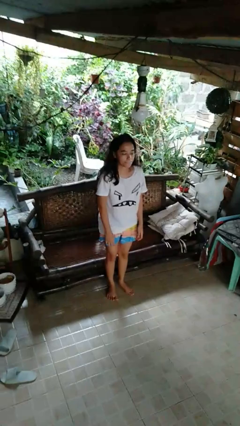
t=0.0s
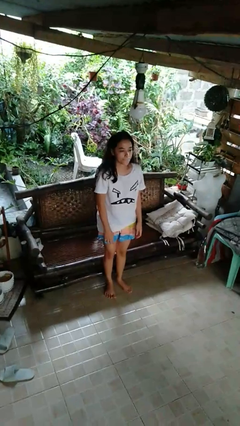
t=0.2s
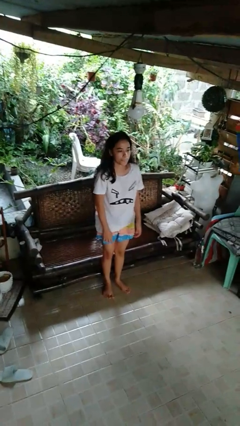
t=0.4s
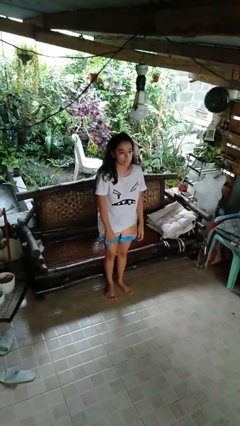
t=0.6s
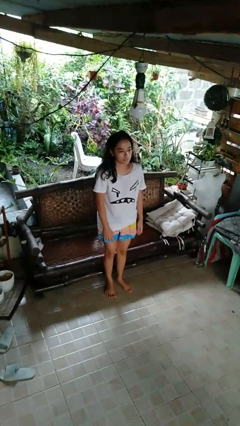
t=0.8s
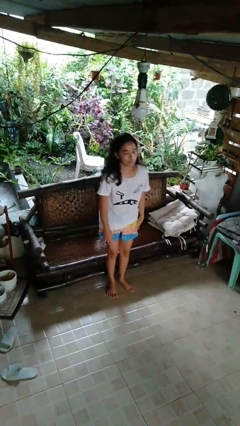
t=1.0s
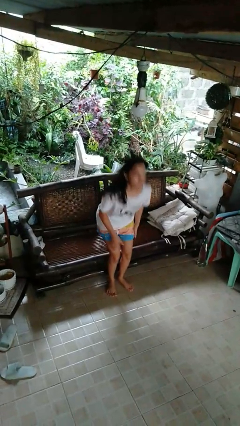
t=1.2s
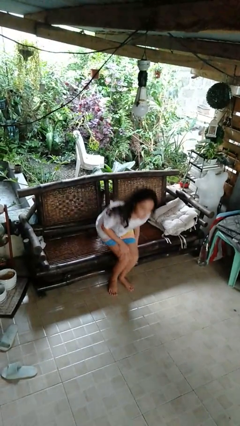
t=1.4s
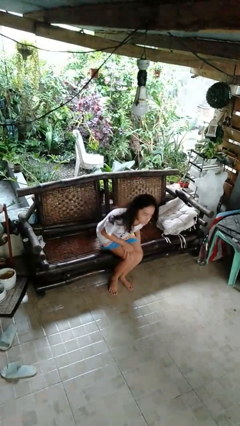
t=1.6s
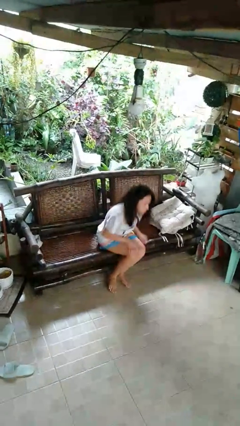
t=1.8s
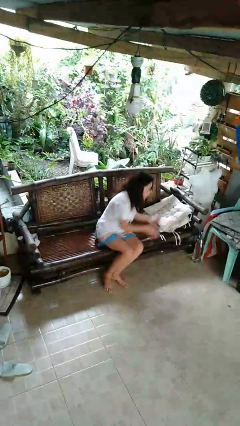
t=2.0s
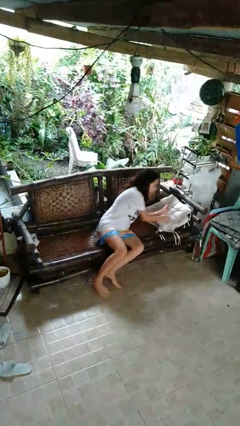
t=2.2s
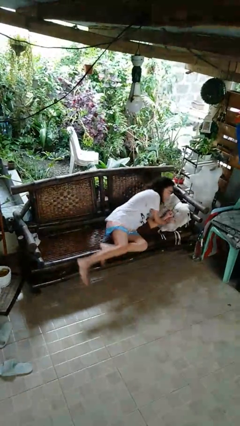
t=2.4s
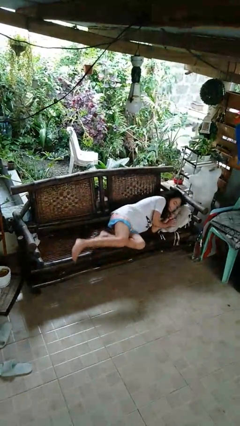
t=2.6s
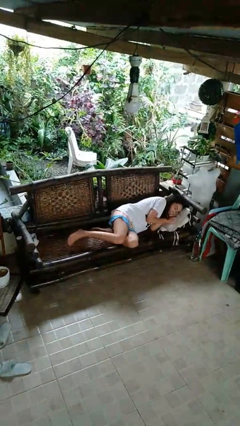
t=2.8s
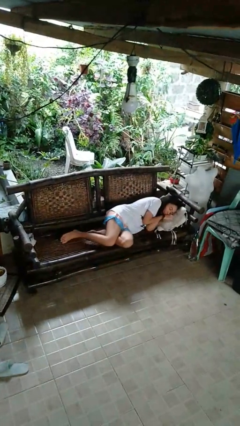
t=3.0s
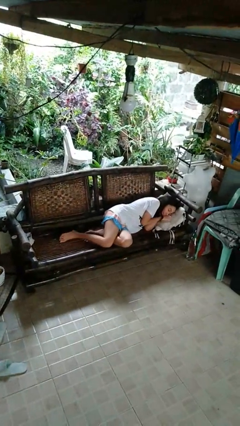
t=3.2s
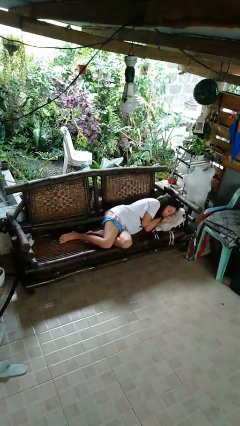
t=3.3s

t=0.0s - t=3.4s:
person lies down on couch

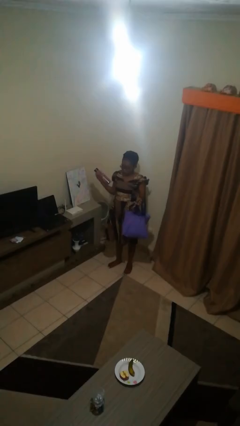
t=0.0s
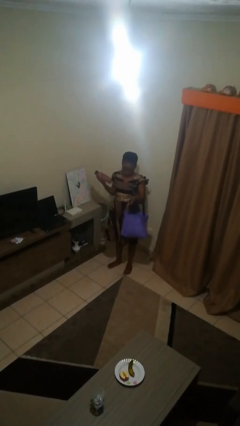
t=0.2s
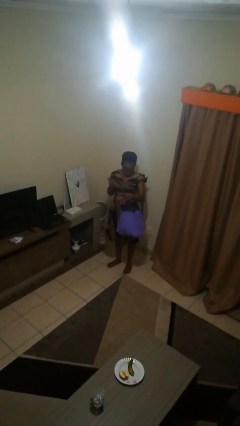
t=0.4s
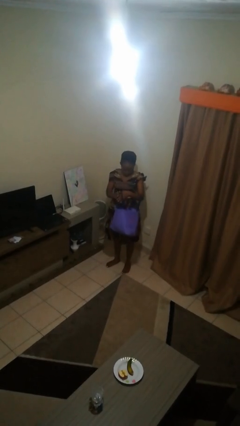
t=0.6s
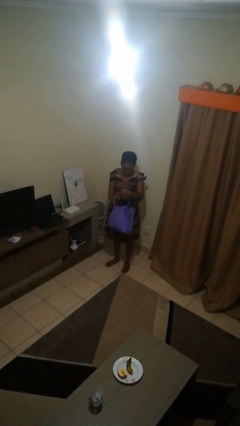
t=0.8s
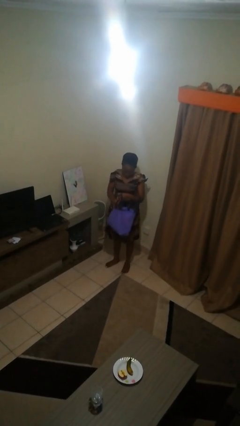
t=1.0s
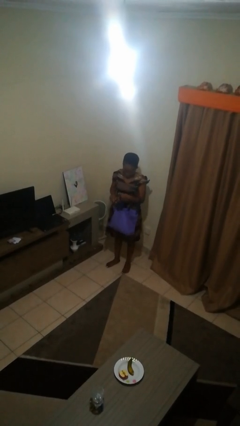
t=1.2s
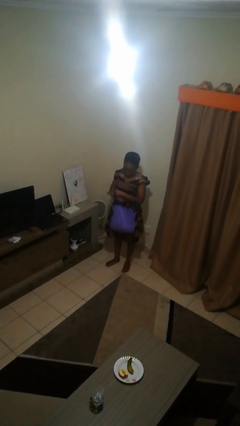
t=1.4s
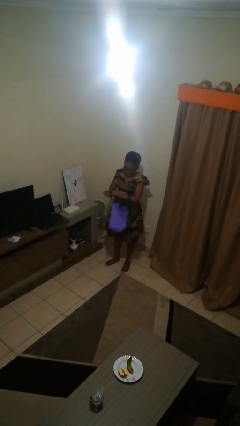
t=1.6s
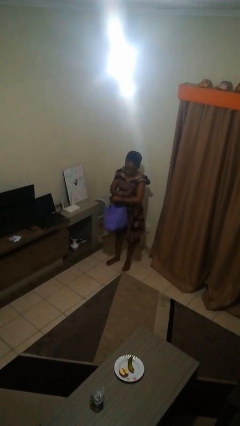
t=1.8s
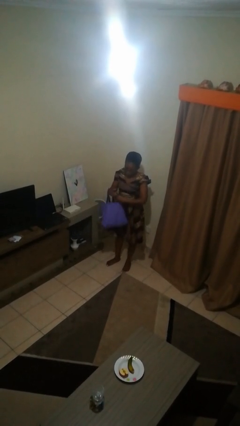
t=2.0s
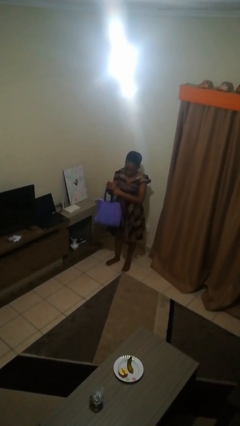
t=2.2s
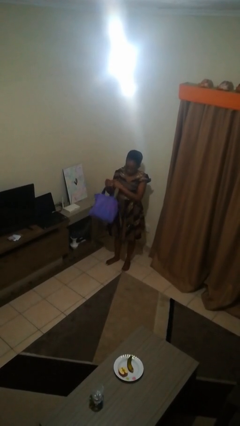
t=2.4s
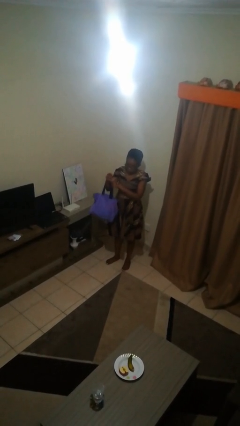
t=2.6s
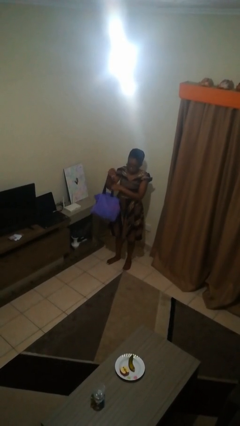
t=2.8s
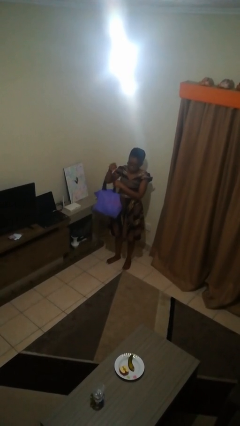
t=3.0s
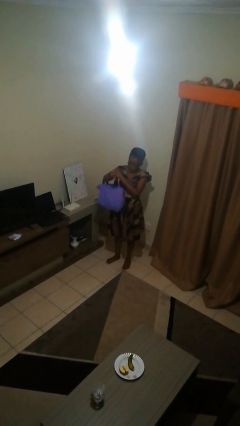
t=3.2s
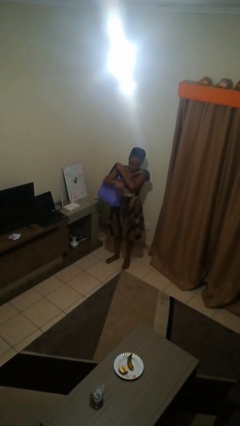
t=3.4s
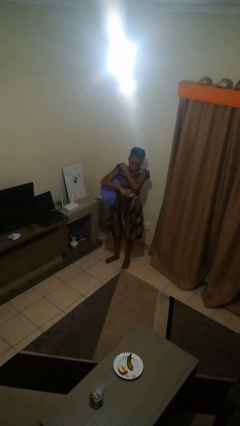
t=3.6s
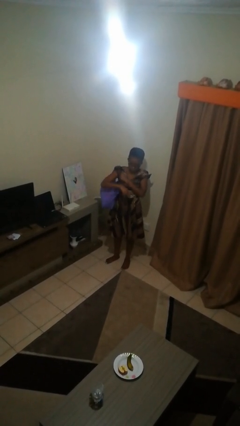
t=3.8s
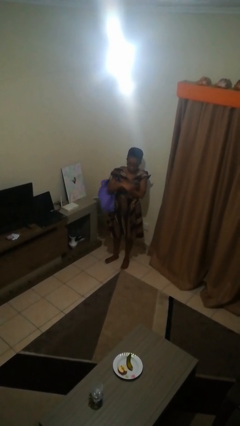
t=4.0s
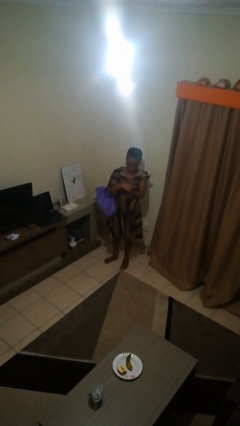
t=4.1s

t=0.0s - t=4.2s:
person puts object into bag

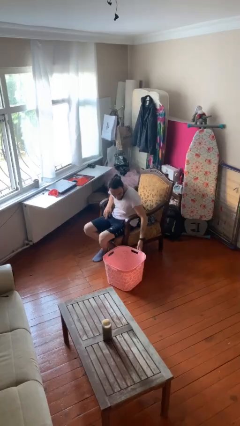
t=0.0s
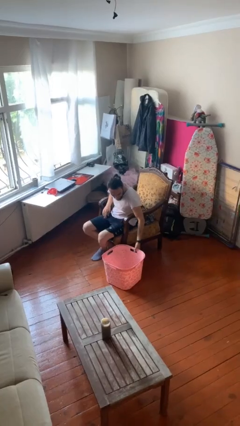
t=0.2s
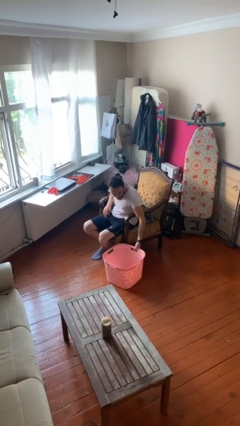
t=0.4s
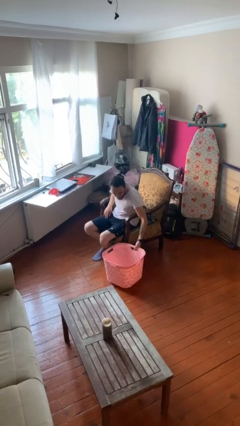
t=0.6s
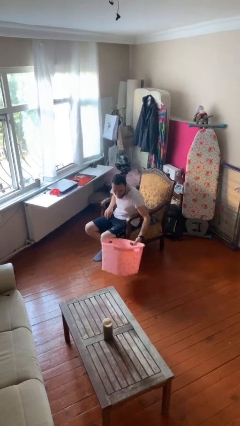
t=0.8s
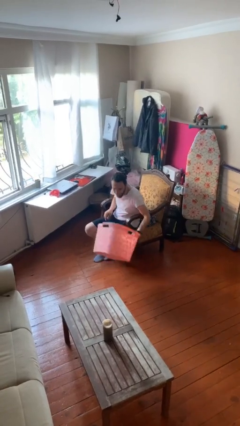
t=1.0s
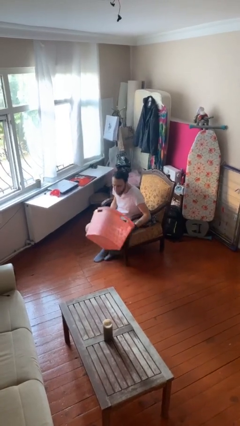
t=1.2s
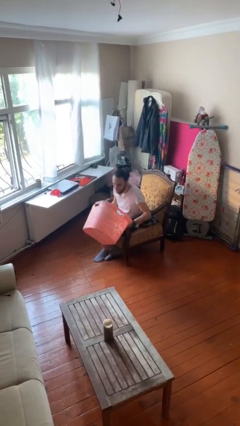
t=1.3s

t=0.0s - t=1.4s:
person picks up object from floor

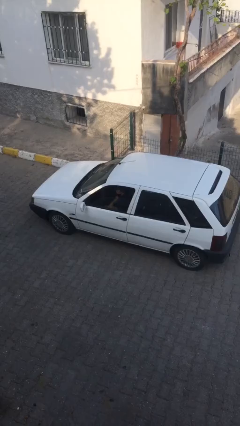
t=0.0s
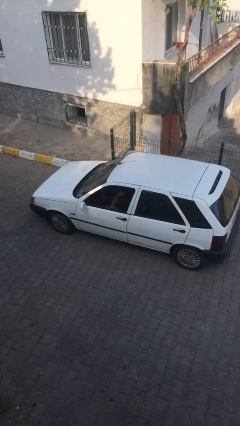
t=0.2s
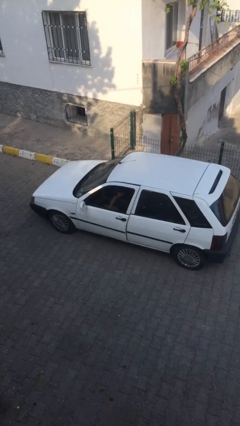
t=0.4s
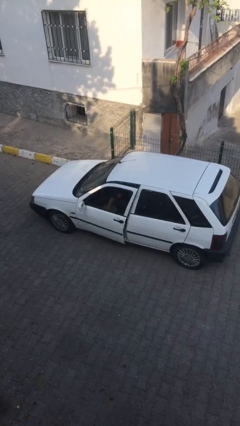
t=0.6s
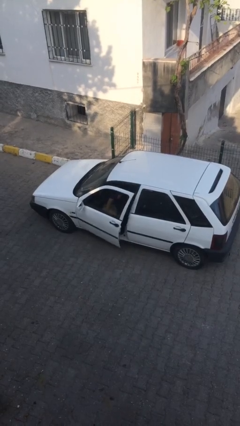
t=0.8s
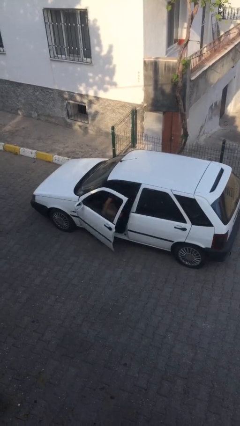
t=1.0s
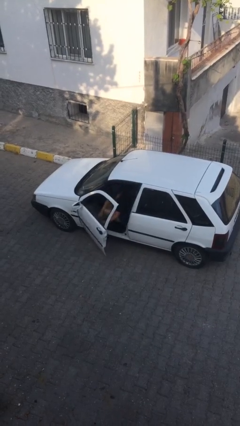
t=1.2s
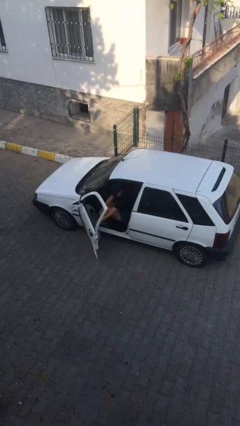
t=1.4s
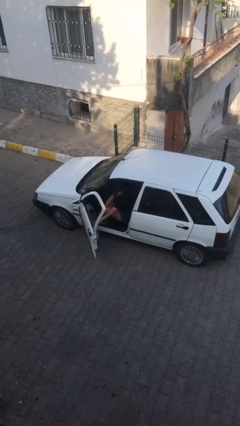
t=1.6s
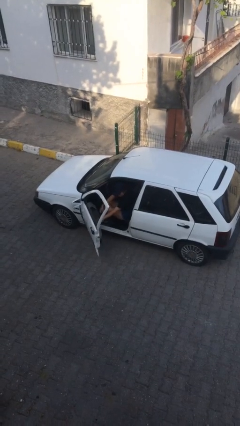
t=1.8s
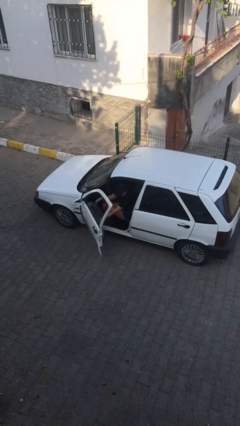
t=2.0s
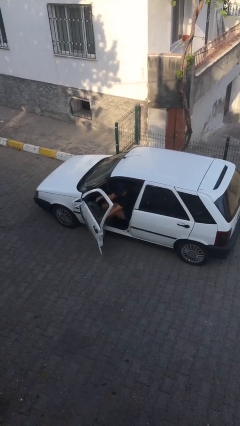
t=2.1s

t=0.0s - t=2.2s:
person opens car door

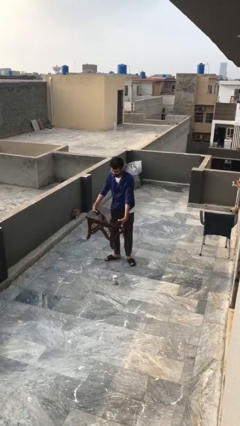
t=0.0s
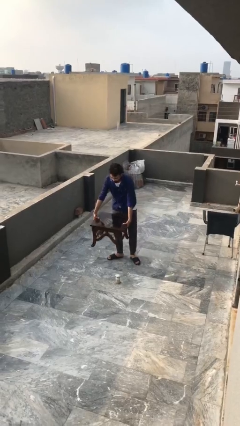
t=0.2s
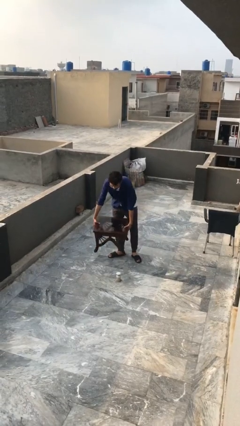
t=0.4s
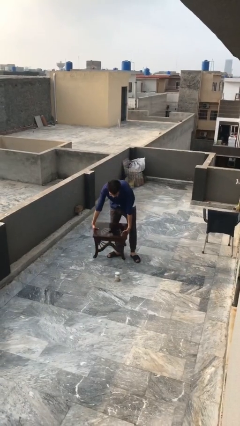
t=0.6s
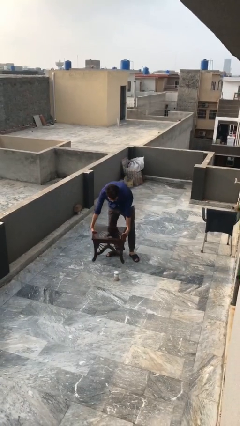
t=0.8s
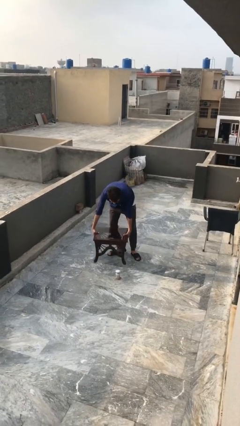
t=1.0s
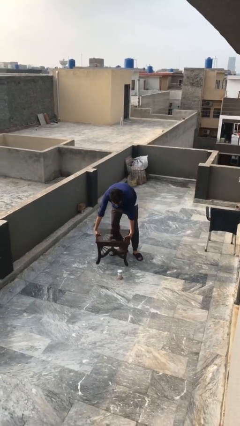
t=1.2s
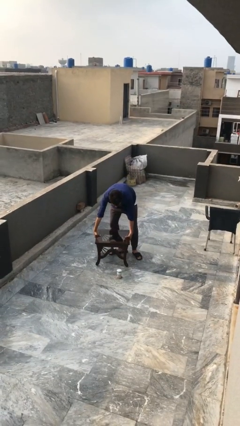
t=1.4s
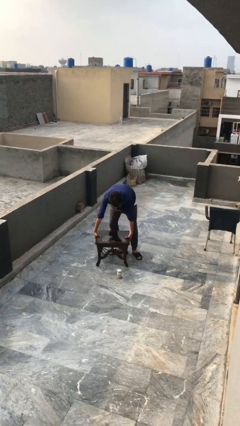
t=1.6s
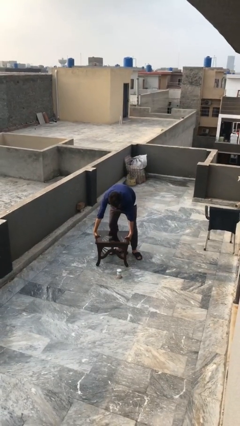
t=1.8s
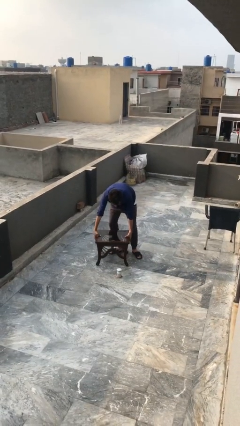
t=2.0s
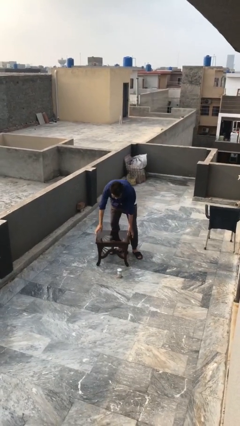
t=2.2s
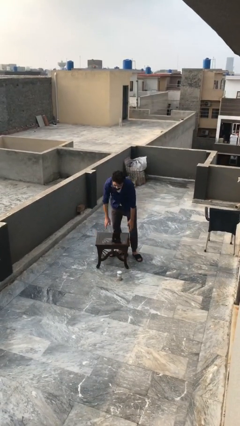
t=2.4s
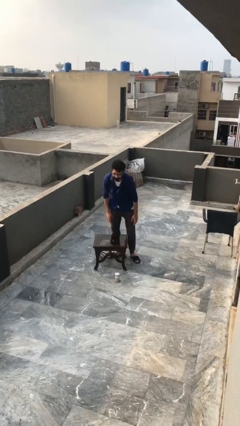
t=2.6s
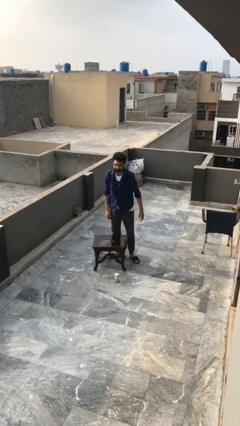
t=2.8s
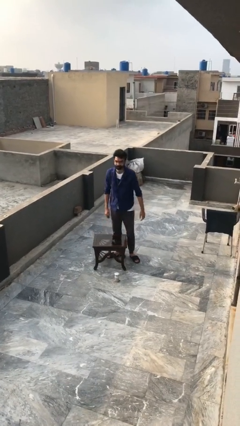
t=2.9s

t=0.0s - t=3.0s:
person puts down object on floor

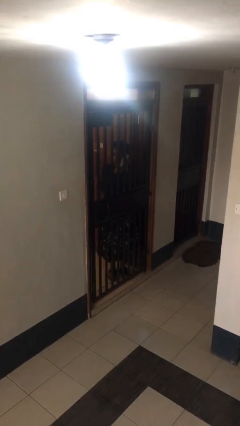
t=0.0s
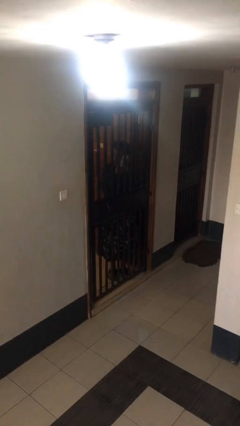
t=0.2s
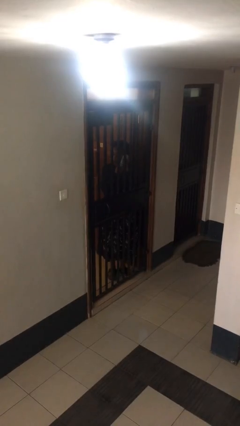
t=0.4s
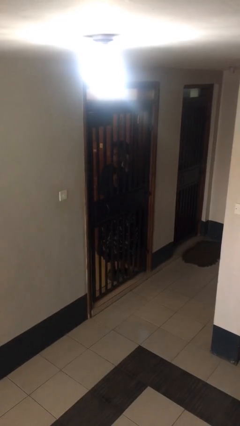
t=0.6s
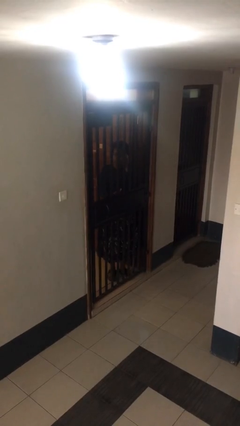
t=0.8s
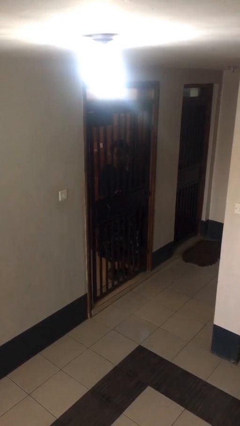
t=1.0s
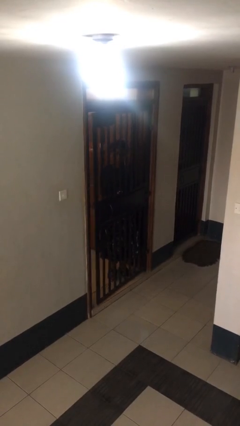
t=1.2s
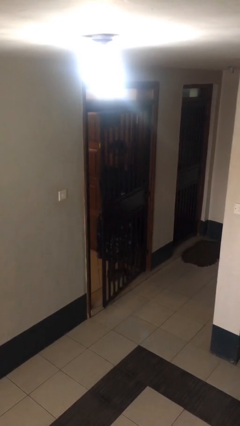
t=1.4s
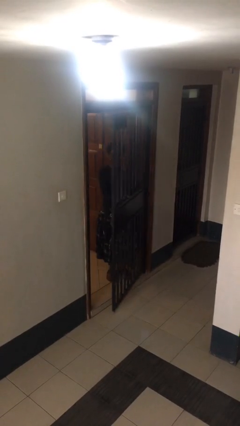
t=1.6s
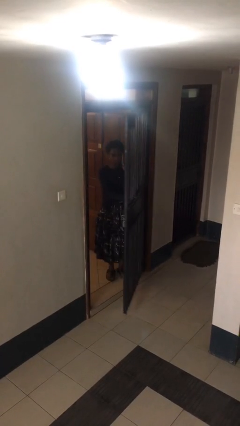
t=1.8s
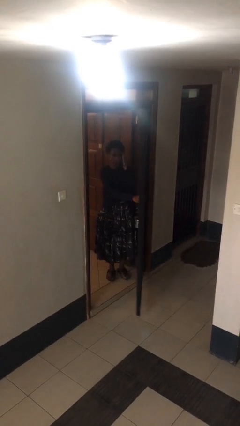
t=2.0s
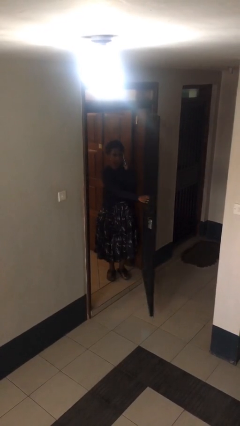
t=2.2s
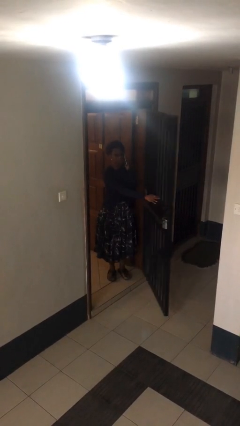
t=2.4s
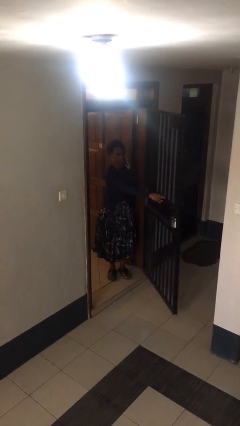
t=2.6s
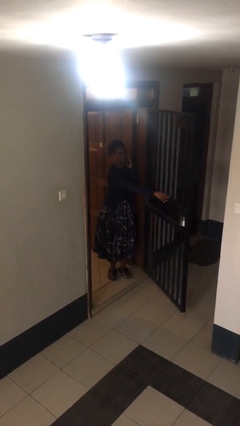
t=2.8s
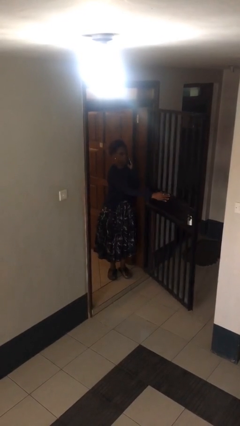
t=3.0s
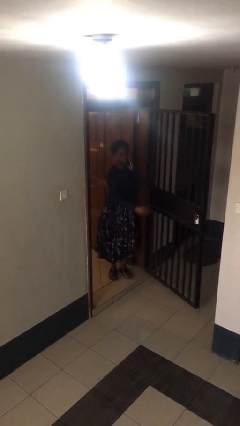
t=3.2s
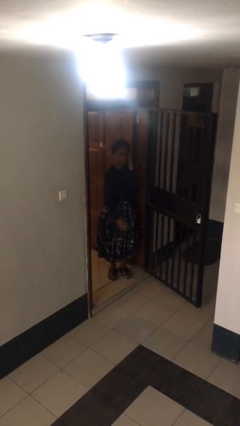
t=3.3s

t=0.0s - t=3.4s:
person opens facility door
